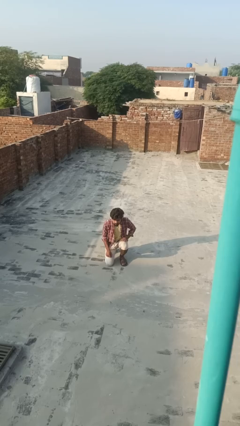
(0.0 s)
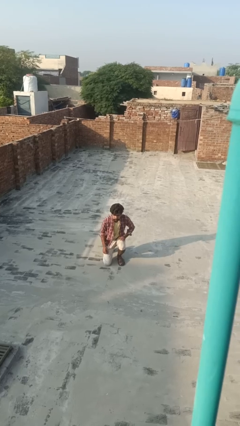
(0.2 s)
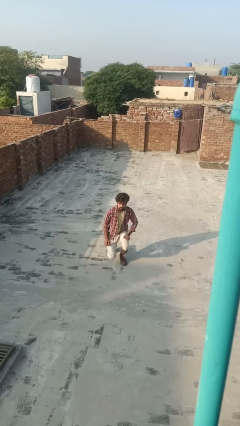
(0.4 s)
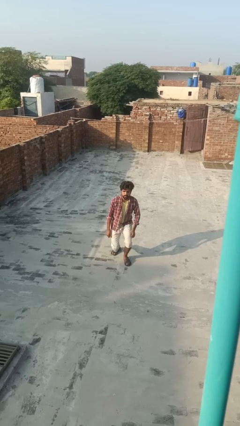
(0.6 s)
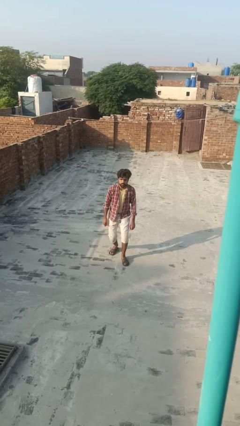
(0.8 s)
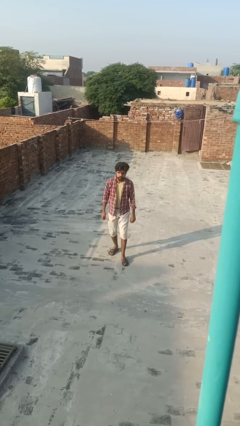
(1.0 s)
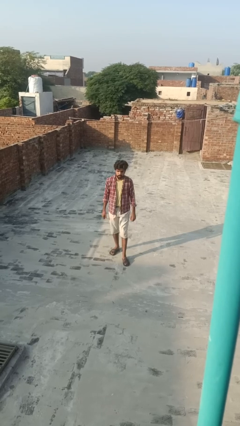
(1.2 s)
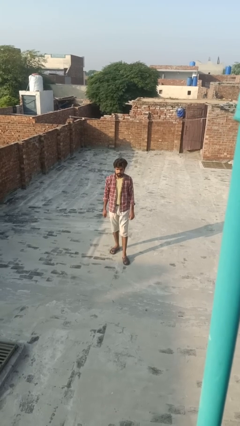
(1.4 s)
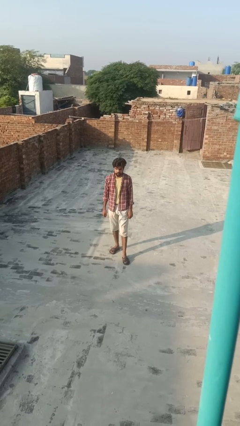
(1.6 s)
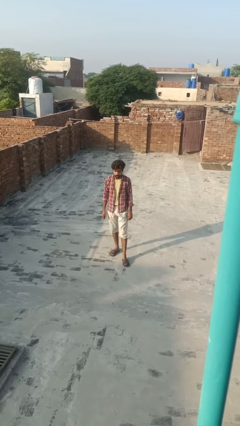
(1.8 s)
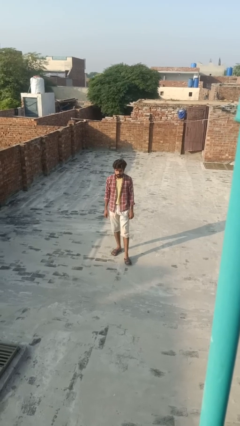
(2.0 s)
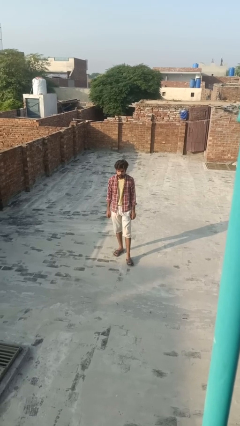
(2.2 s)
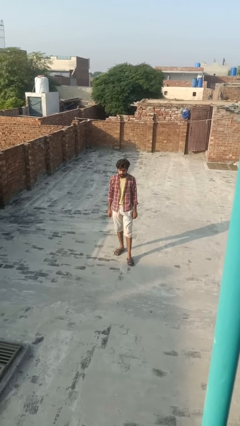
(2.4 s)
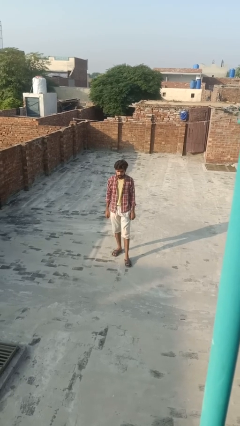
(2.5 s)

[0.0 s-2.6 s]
person stands up

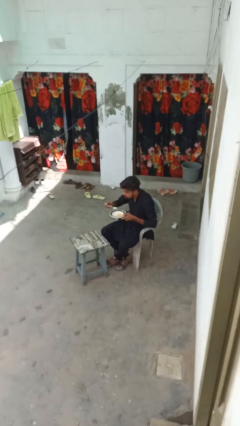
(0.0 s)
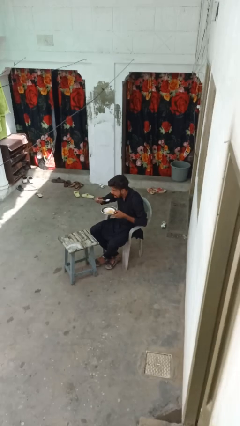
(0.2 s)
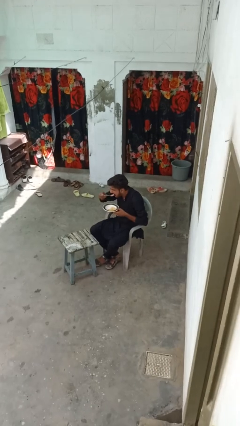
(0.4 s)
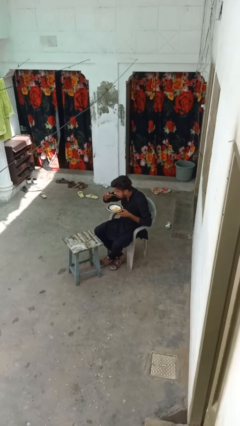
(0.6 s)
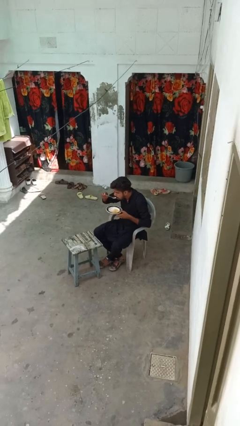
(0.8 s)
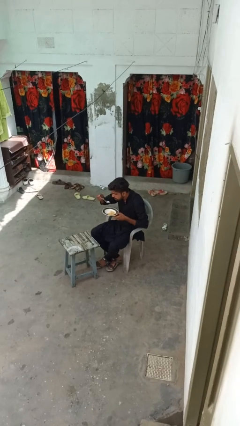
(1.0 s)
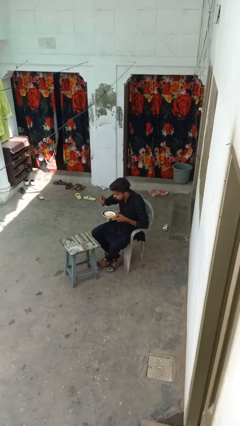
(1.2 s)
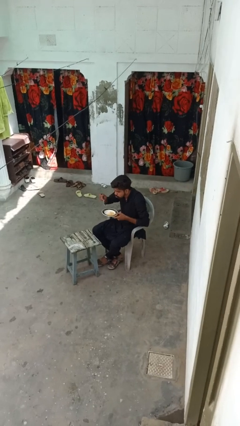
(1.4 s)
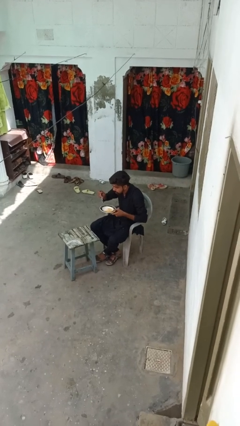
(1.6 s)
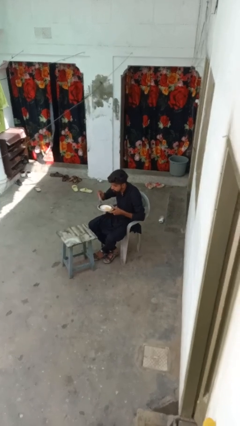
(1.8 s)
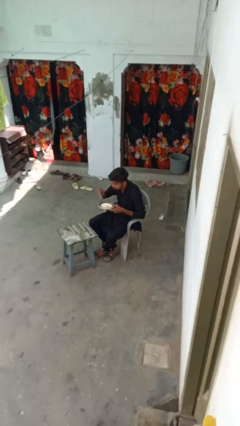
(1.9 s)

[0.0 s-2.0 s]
person eats with utensil

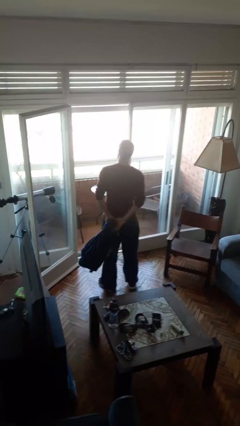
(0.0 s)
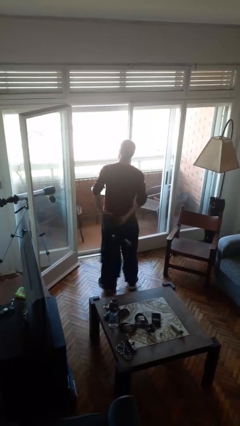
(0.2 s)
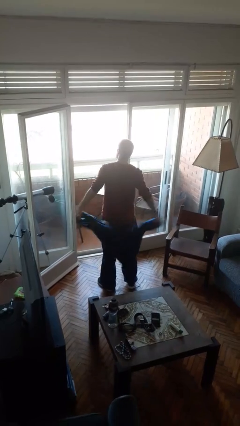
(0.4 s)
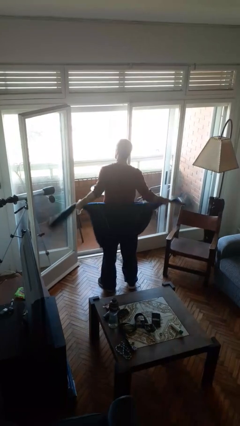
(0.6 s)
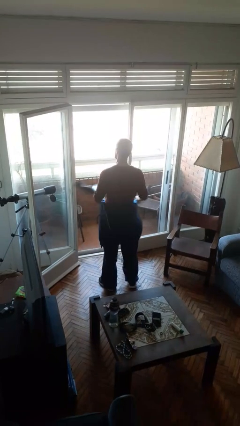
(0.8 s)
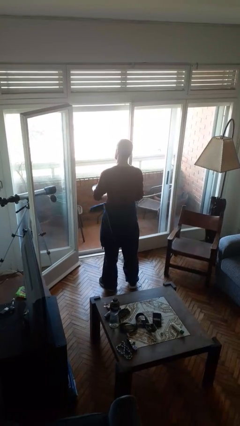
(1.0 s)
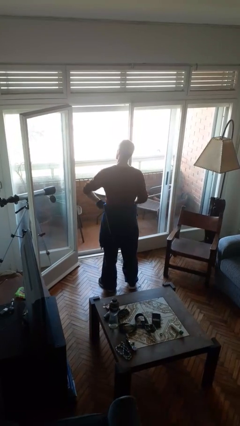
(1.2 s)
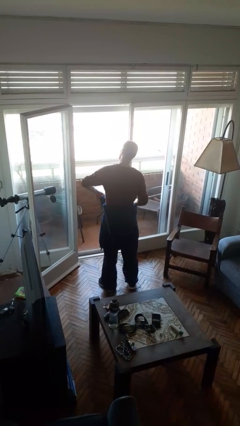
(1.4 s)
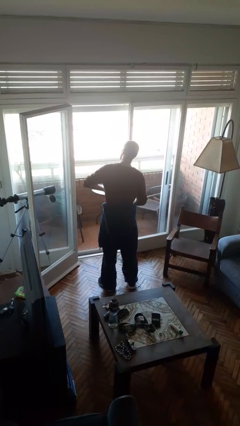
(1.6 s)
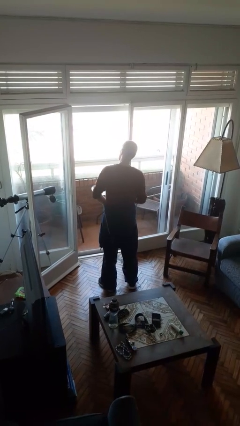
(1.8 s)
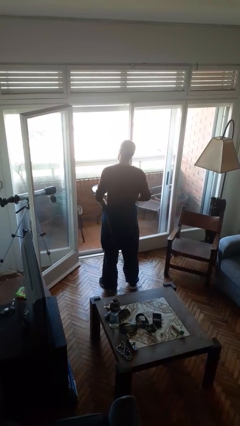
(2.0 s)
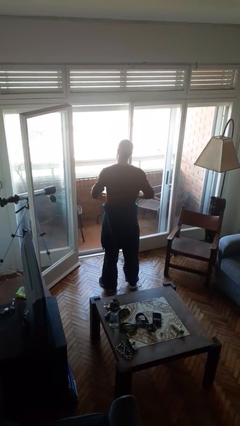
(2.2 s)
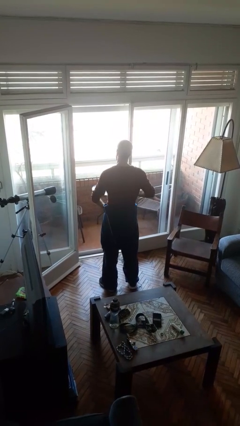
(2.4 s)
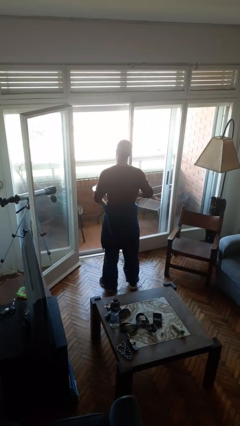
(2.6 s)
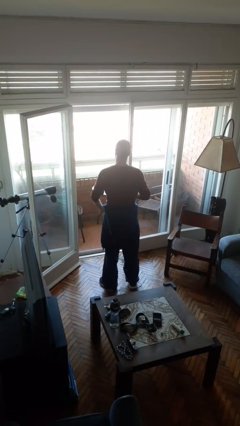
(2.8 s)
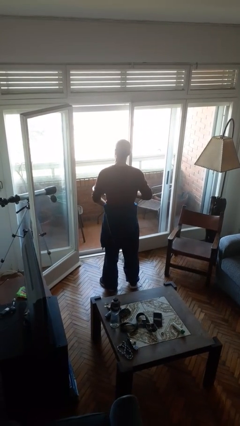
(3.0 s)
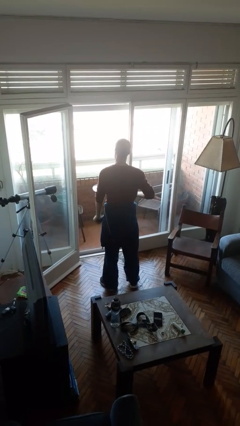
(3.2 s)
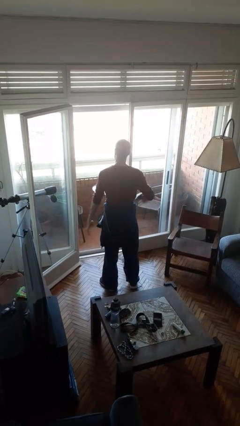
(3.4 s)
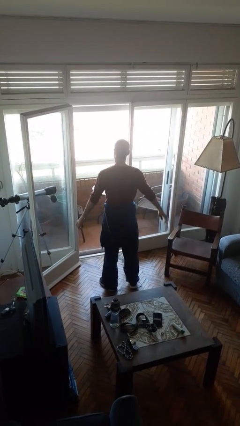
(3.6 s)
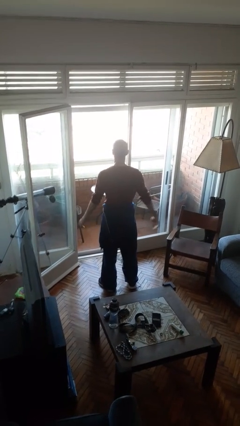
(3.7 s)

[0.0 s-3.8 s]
person ties jacket around waist

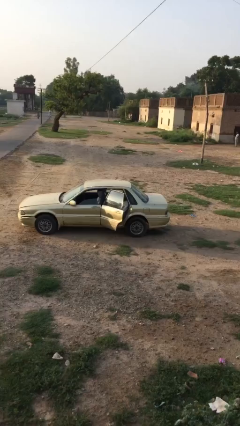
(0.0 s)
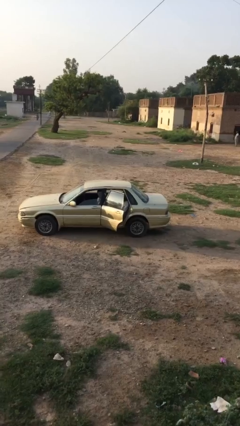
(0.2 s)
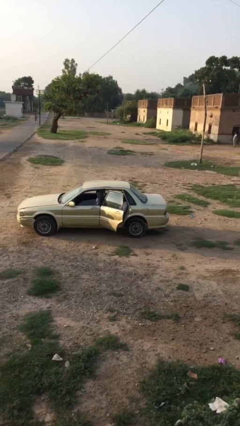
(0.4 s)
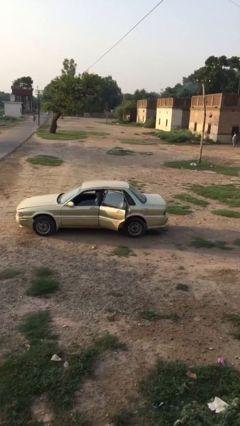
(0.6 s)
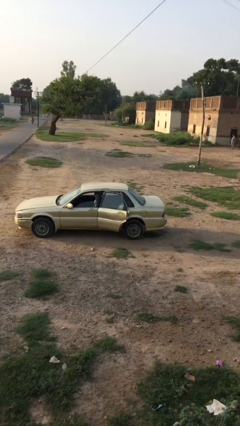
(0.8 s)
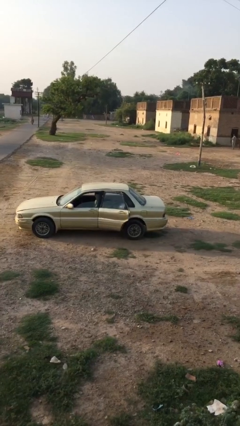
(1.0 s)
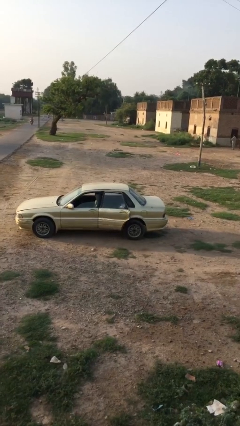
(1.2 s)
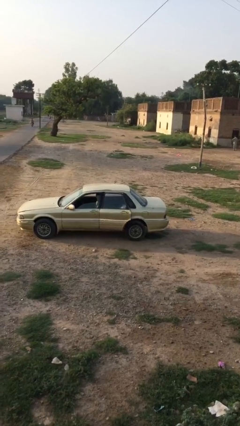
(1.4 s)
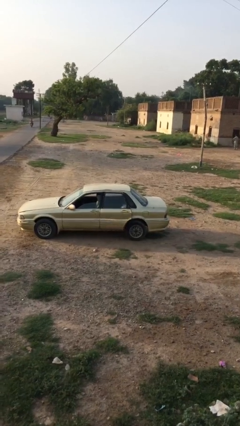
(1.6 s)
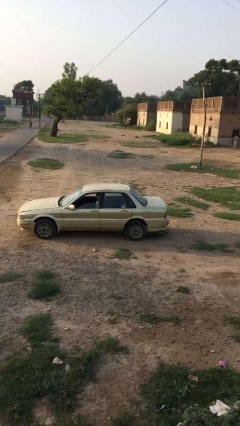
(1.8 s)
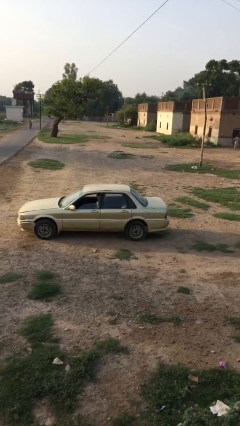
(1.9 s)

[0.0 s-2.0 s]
person closes car door

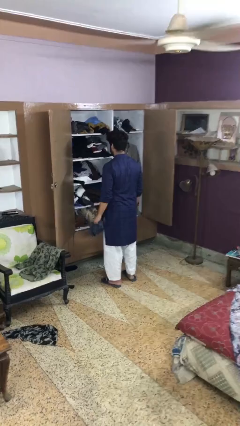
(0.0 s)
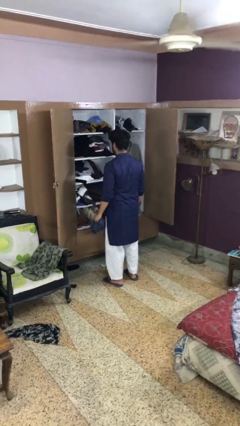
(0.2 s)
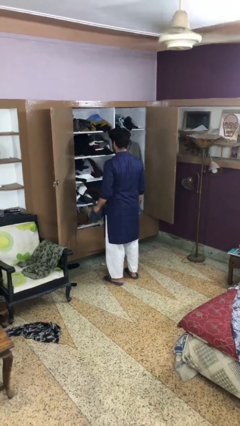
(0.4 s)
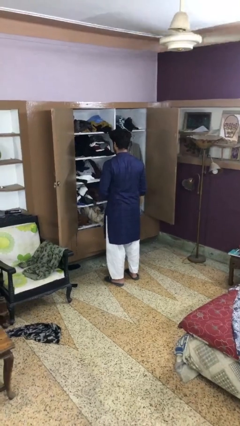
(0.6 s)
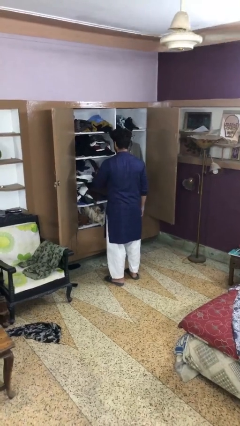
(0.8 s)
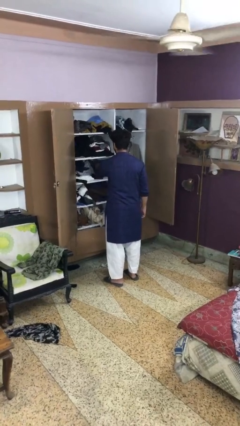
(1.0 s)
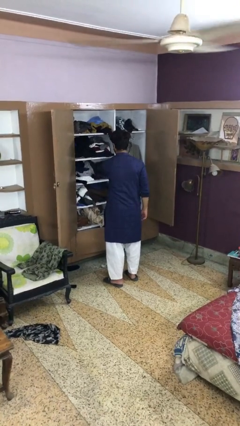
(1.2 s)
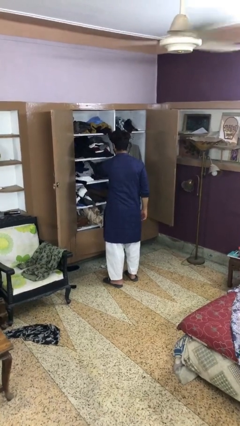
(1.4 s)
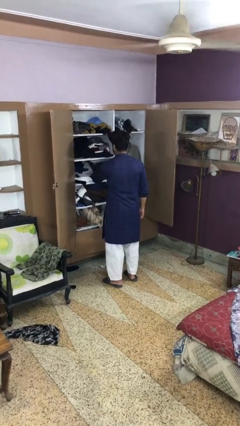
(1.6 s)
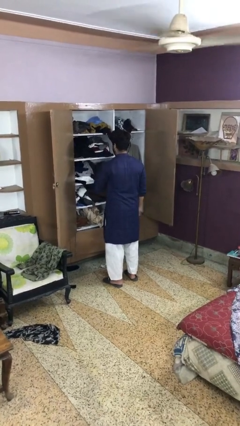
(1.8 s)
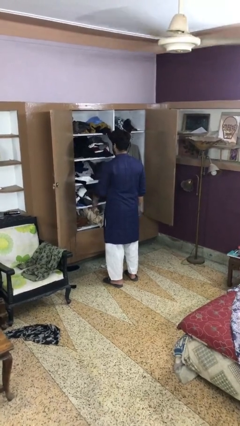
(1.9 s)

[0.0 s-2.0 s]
person puts clothes into dresser

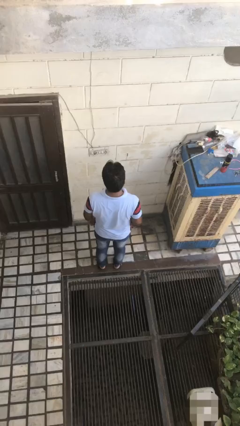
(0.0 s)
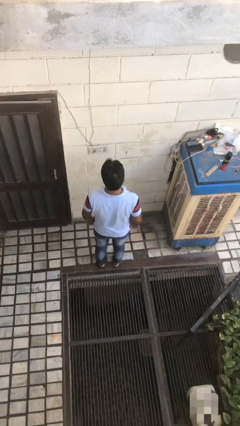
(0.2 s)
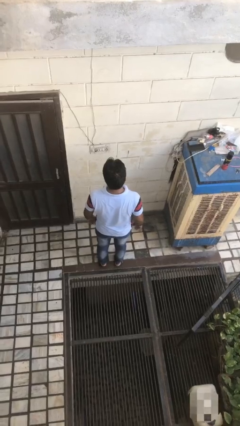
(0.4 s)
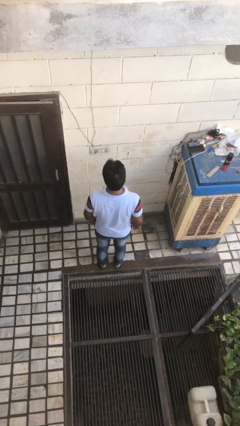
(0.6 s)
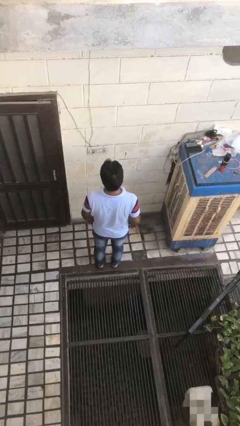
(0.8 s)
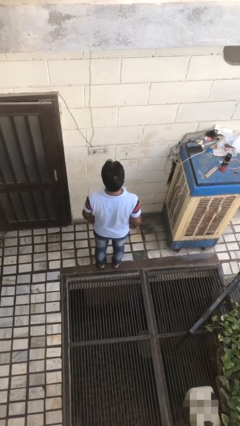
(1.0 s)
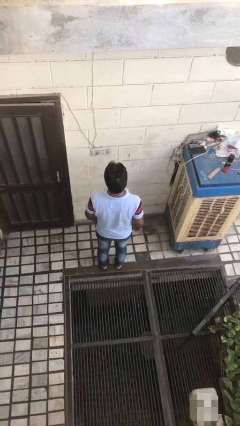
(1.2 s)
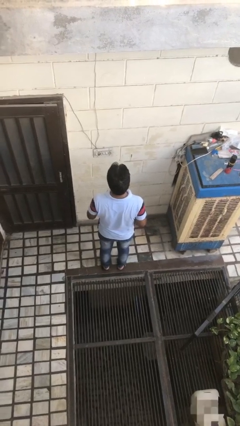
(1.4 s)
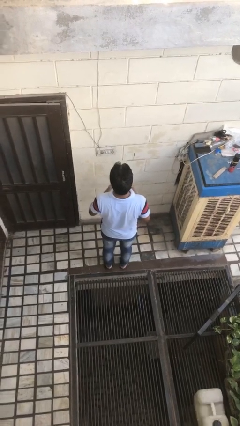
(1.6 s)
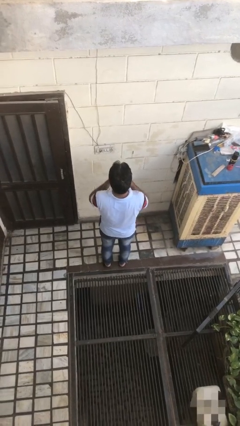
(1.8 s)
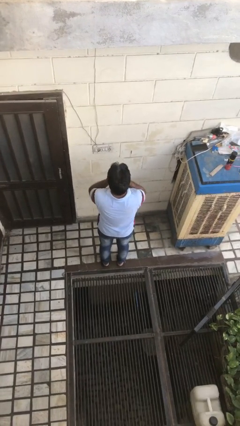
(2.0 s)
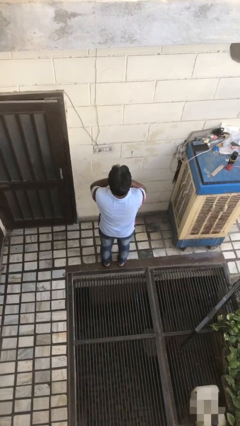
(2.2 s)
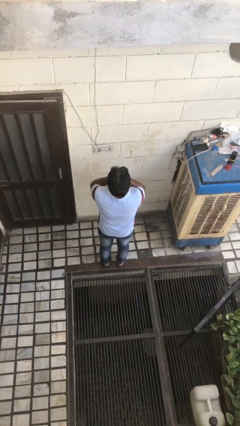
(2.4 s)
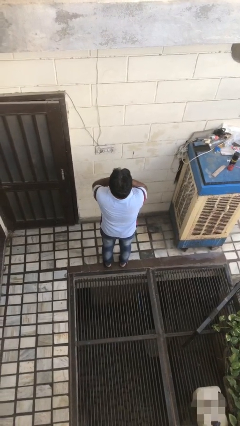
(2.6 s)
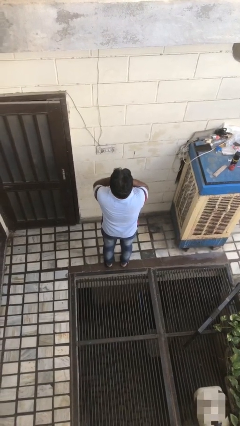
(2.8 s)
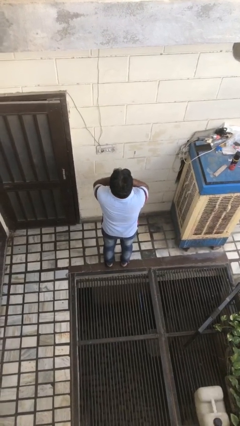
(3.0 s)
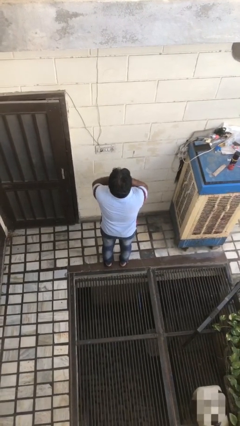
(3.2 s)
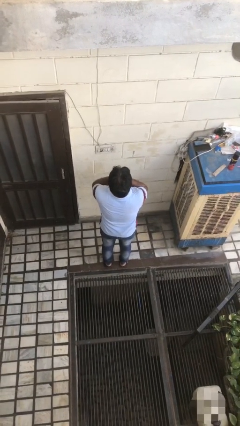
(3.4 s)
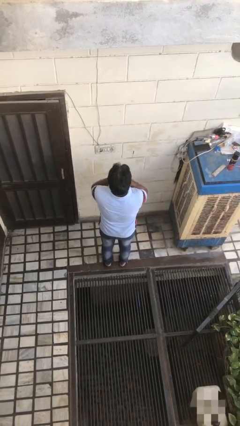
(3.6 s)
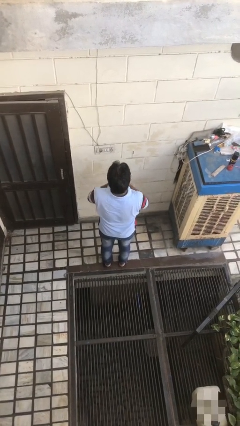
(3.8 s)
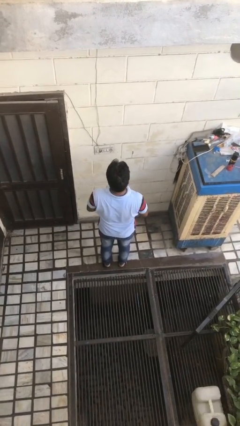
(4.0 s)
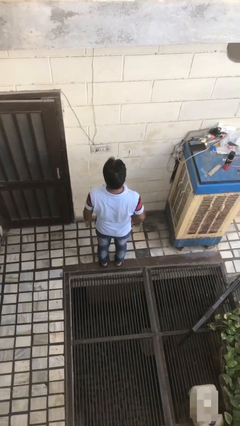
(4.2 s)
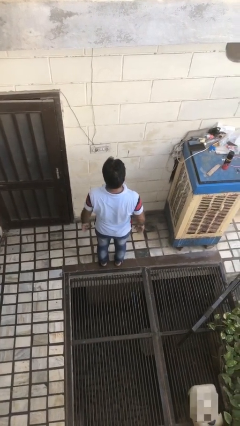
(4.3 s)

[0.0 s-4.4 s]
person yawns

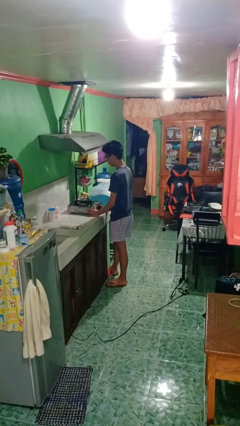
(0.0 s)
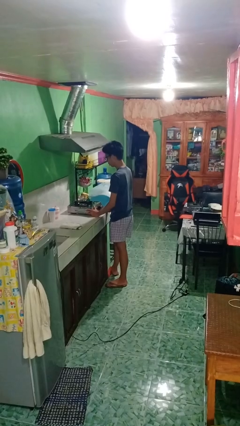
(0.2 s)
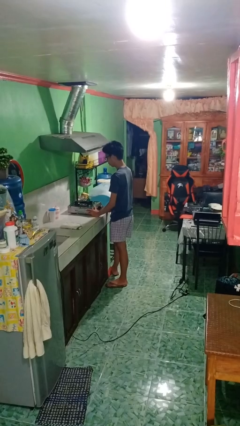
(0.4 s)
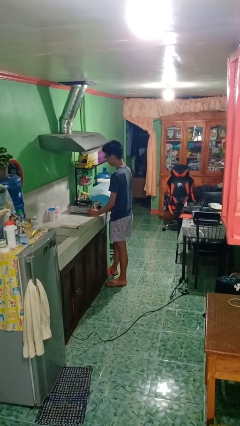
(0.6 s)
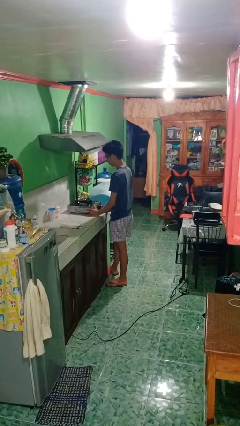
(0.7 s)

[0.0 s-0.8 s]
person turns off stovetop
